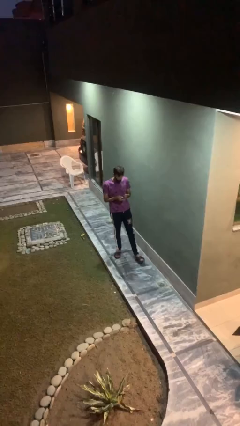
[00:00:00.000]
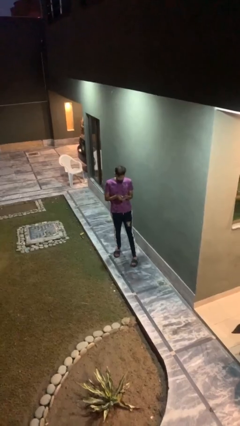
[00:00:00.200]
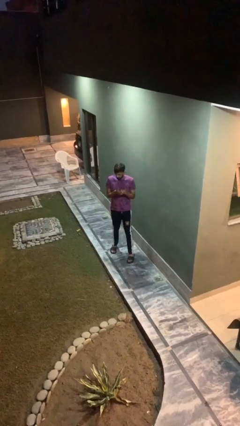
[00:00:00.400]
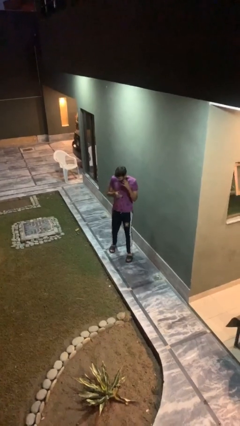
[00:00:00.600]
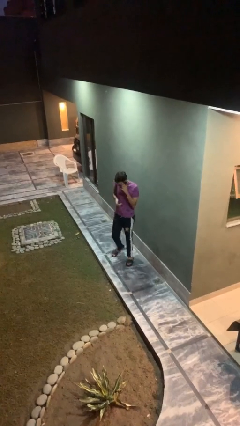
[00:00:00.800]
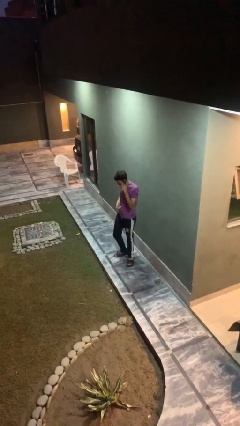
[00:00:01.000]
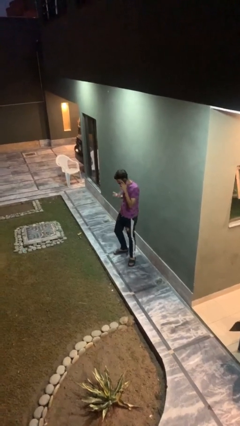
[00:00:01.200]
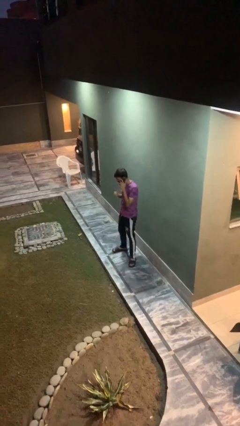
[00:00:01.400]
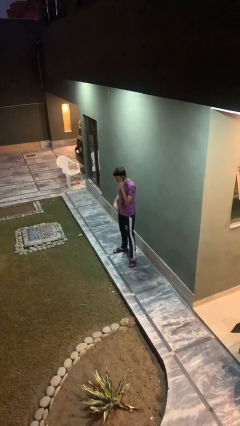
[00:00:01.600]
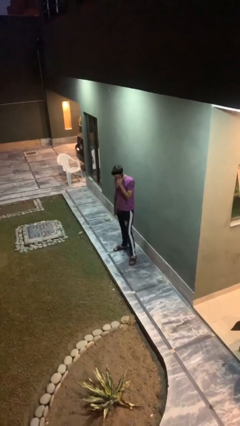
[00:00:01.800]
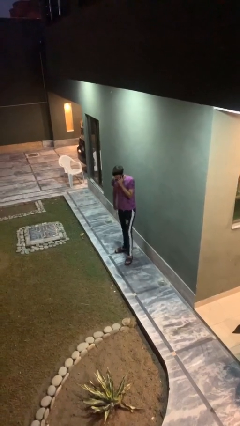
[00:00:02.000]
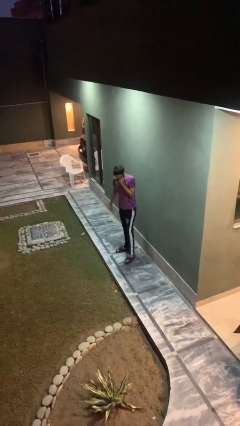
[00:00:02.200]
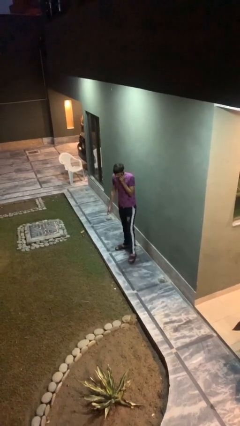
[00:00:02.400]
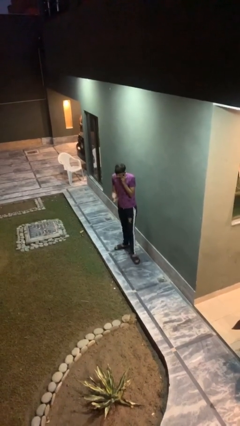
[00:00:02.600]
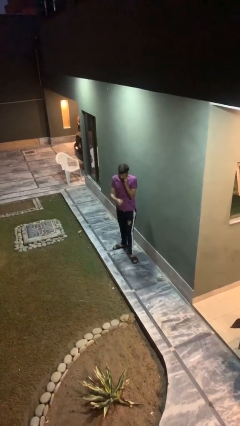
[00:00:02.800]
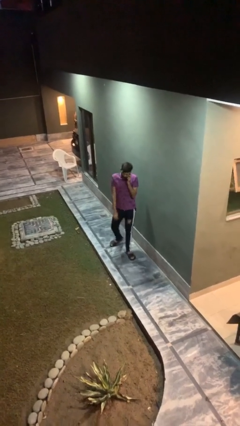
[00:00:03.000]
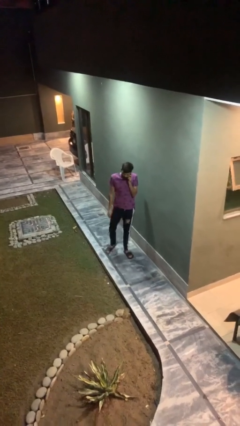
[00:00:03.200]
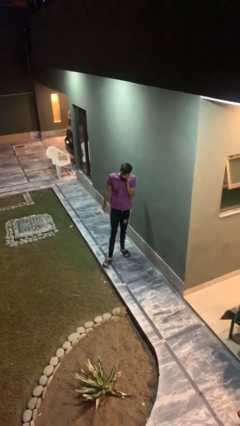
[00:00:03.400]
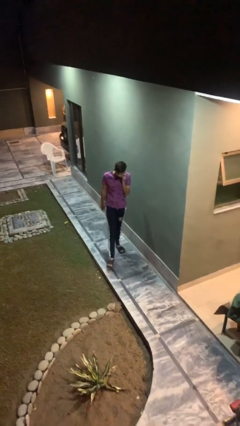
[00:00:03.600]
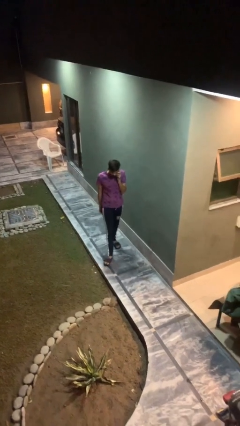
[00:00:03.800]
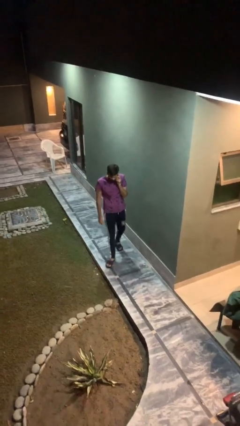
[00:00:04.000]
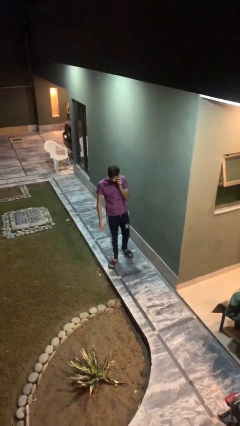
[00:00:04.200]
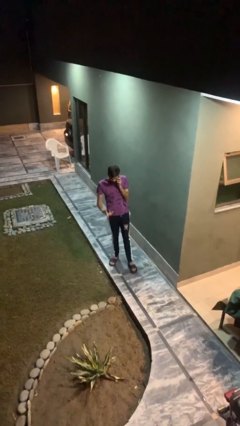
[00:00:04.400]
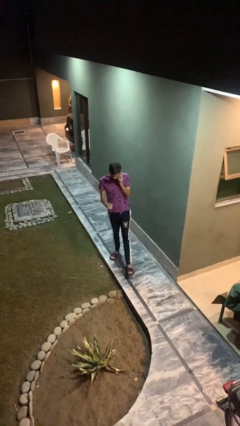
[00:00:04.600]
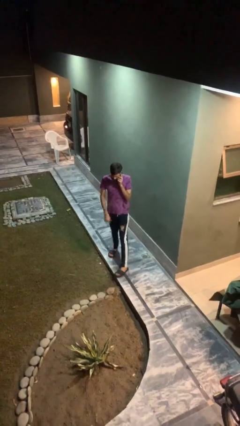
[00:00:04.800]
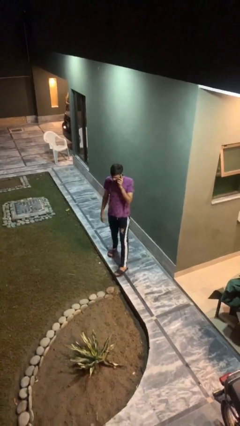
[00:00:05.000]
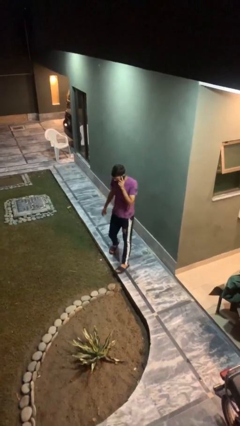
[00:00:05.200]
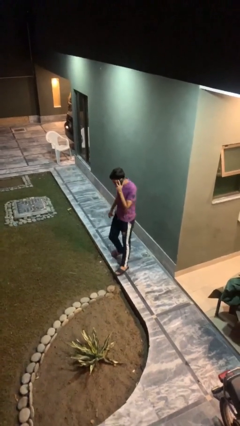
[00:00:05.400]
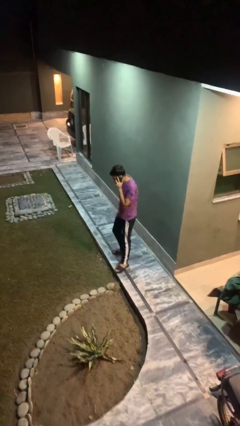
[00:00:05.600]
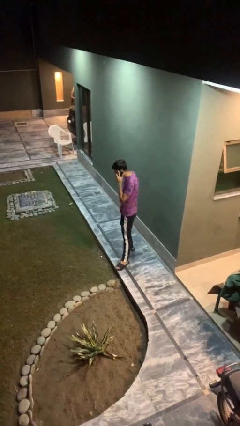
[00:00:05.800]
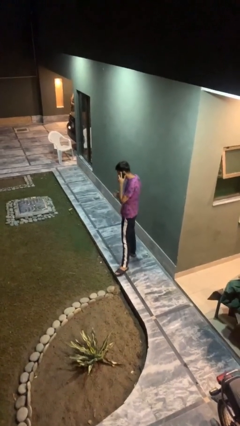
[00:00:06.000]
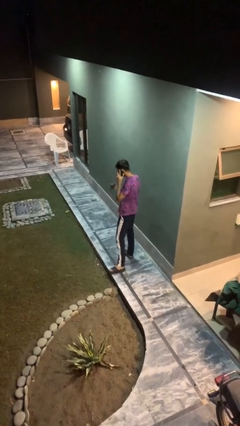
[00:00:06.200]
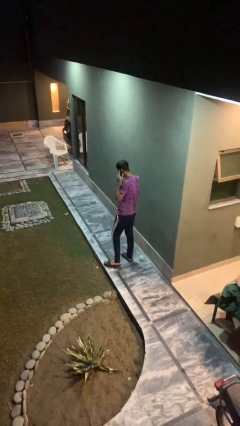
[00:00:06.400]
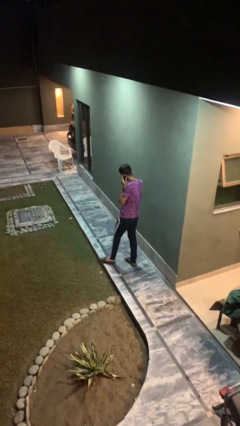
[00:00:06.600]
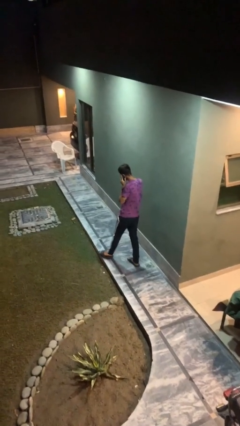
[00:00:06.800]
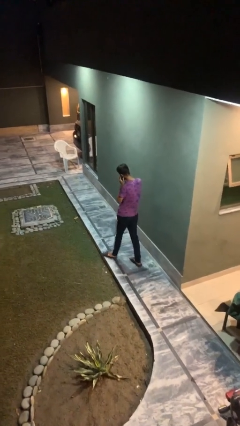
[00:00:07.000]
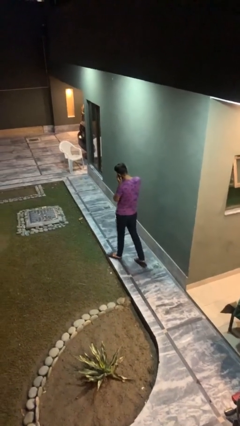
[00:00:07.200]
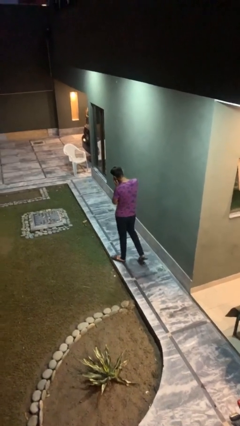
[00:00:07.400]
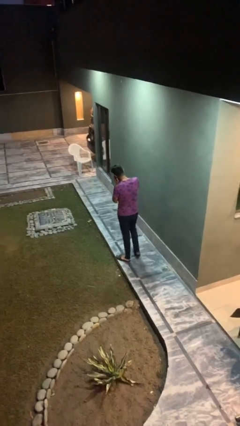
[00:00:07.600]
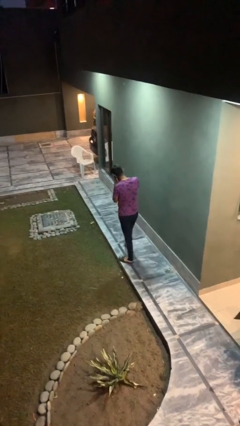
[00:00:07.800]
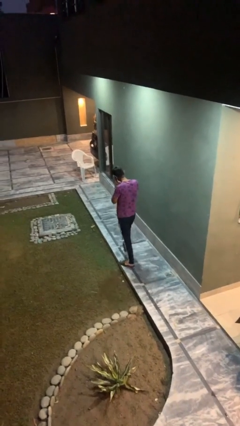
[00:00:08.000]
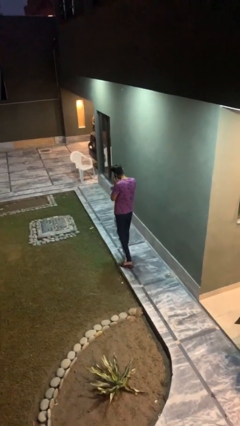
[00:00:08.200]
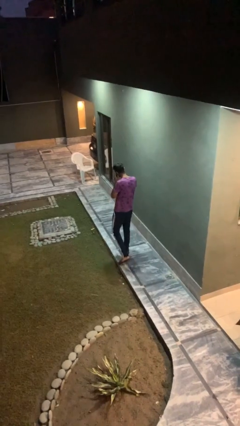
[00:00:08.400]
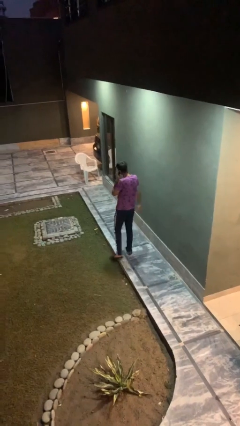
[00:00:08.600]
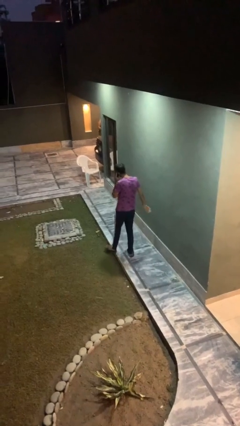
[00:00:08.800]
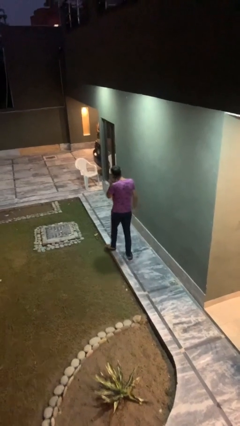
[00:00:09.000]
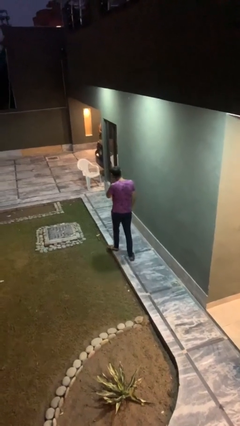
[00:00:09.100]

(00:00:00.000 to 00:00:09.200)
person talks on phone

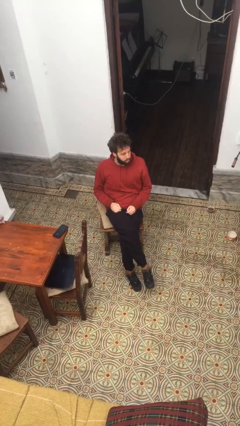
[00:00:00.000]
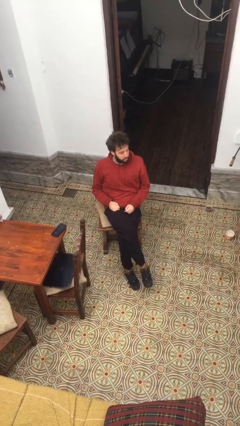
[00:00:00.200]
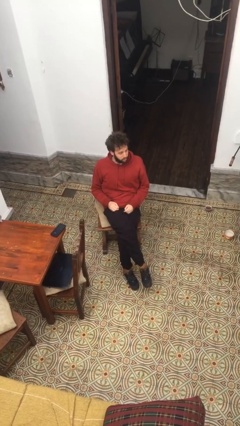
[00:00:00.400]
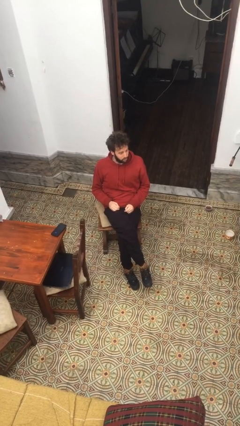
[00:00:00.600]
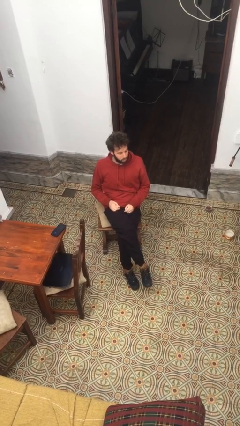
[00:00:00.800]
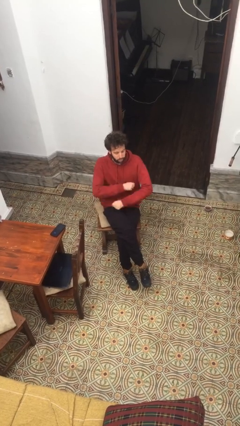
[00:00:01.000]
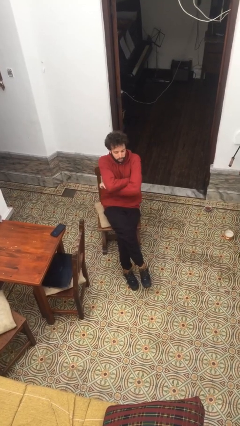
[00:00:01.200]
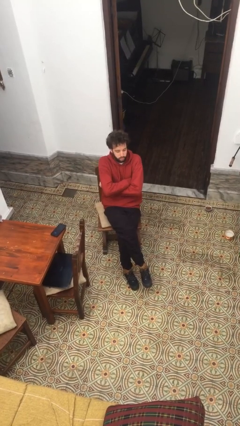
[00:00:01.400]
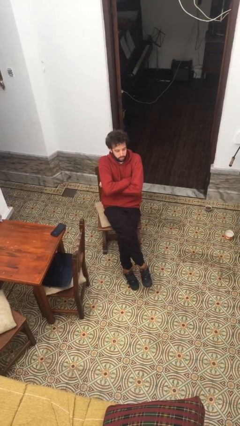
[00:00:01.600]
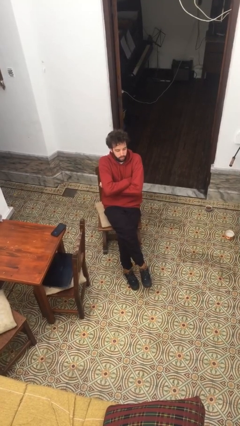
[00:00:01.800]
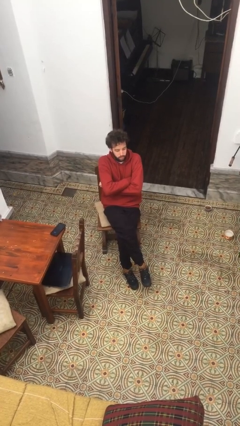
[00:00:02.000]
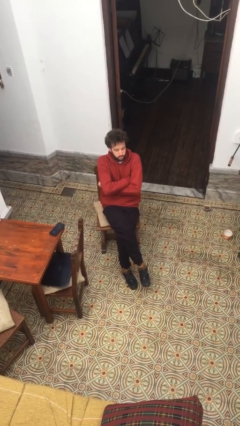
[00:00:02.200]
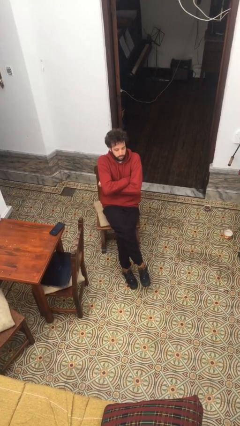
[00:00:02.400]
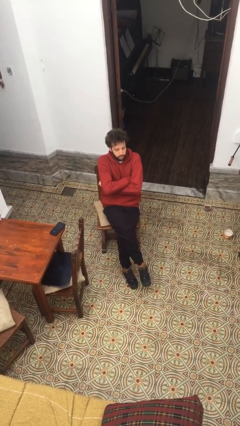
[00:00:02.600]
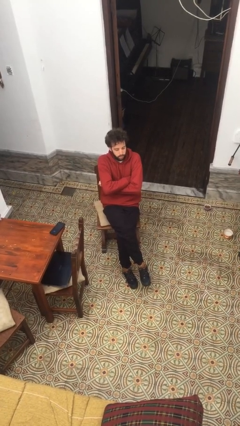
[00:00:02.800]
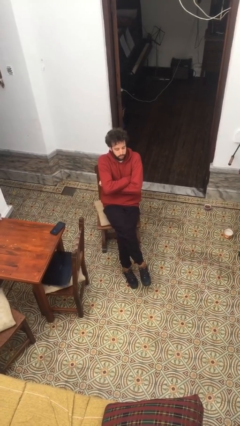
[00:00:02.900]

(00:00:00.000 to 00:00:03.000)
person crosses arms

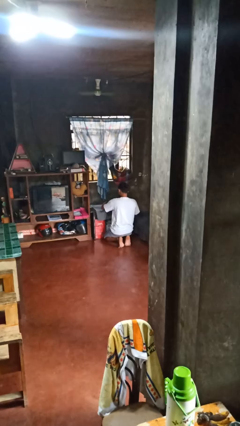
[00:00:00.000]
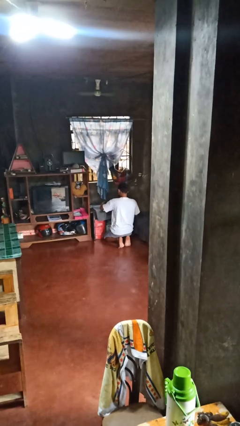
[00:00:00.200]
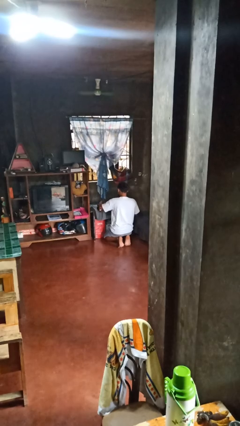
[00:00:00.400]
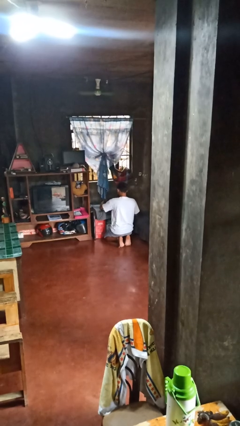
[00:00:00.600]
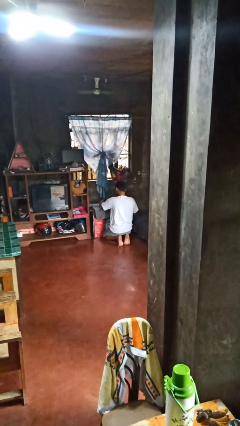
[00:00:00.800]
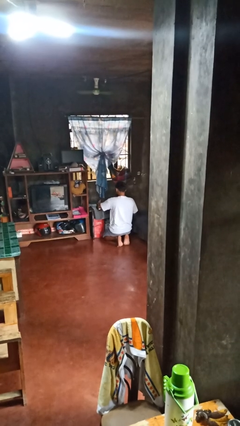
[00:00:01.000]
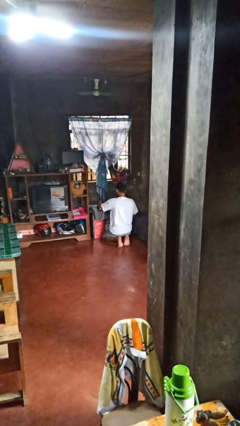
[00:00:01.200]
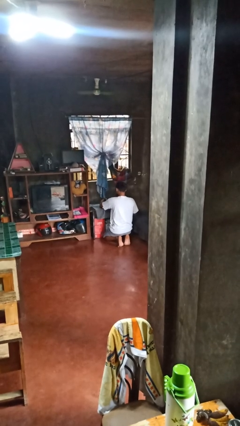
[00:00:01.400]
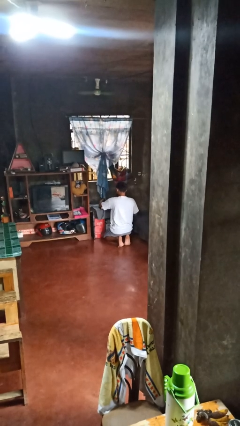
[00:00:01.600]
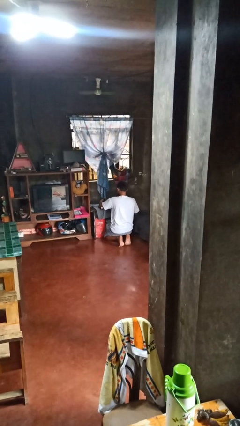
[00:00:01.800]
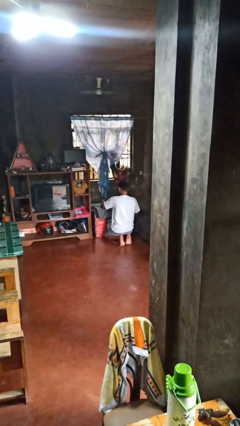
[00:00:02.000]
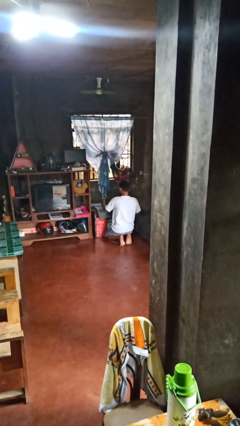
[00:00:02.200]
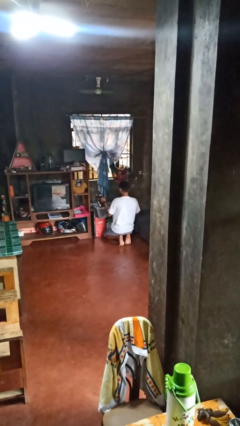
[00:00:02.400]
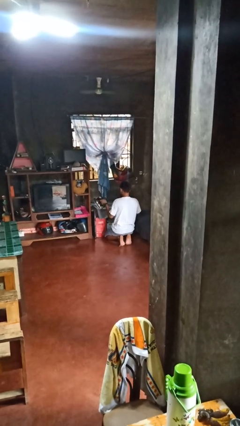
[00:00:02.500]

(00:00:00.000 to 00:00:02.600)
person irons clothes

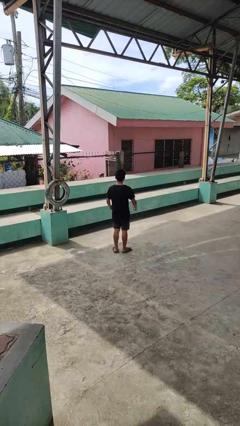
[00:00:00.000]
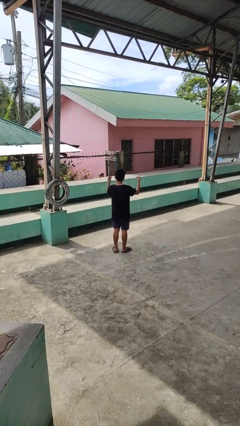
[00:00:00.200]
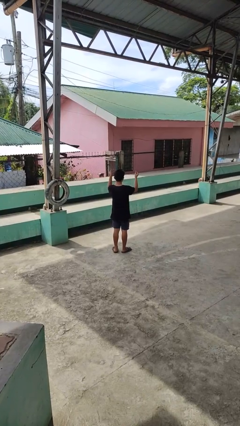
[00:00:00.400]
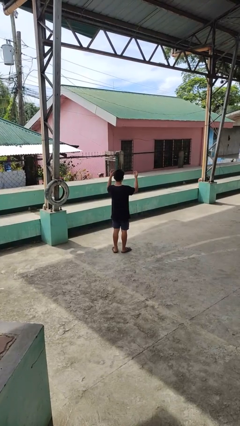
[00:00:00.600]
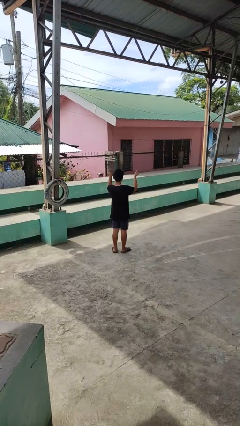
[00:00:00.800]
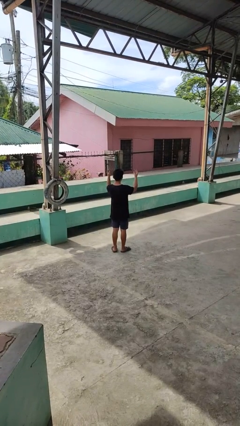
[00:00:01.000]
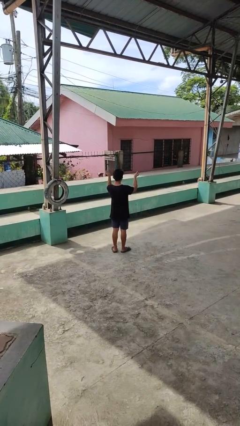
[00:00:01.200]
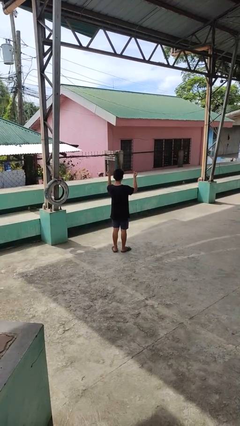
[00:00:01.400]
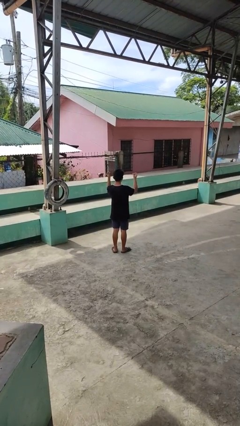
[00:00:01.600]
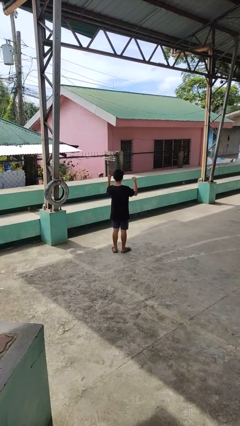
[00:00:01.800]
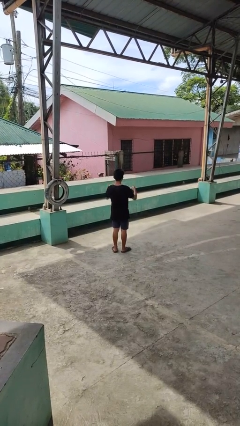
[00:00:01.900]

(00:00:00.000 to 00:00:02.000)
person snaps fingers

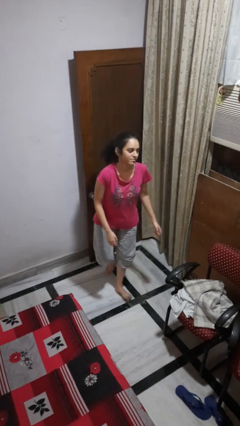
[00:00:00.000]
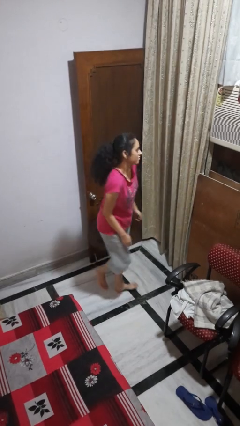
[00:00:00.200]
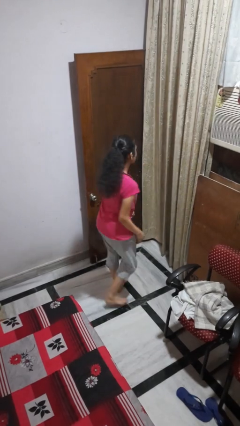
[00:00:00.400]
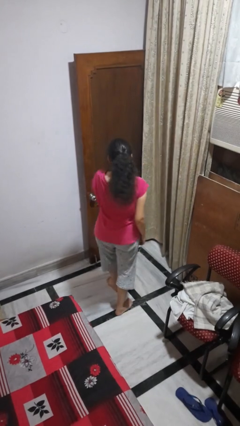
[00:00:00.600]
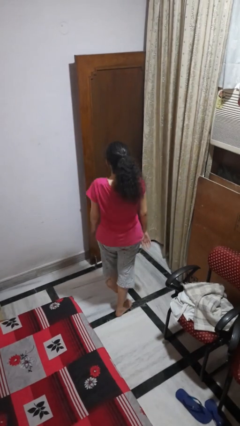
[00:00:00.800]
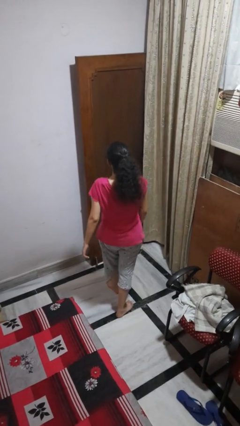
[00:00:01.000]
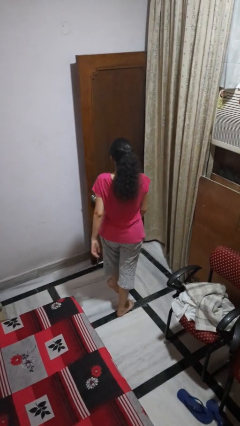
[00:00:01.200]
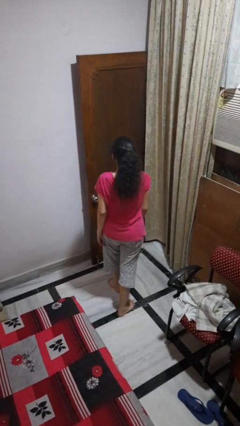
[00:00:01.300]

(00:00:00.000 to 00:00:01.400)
person twirls
